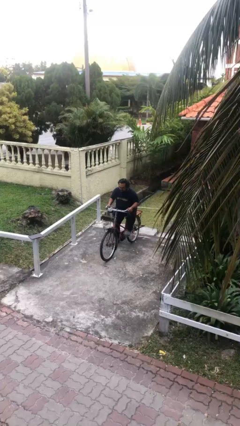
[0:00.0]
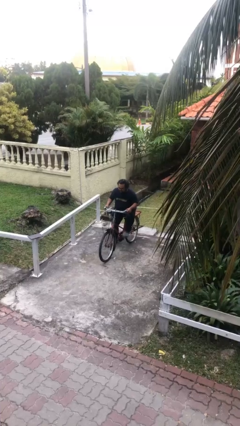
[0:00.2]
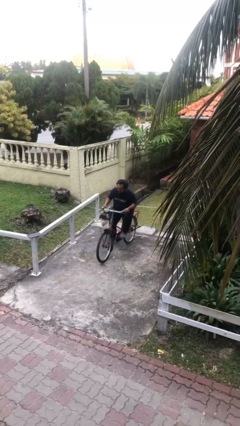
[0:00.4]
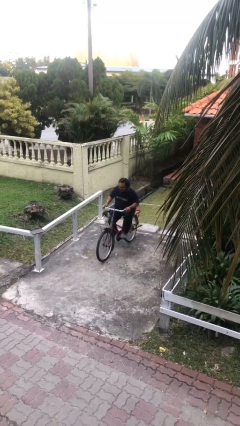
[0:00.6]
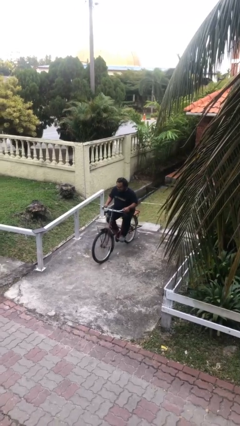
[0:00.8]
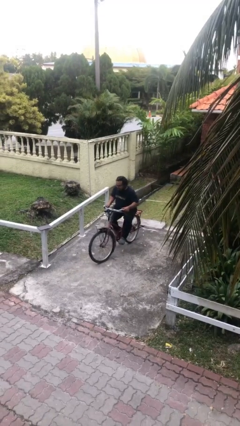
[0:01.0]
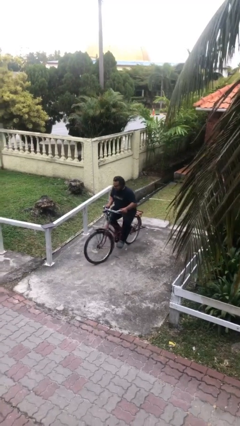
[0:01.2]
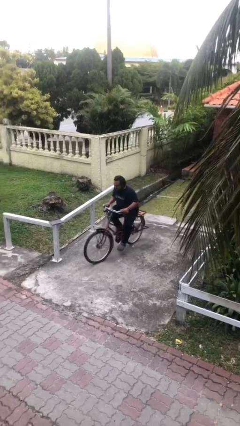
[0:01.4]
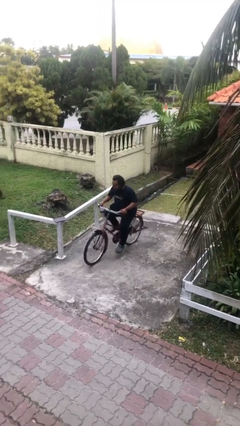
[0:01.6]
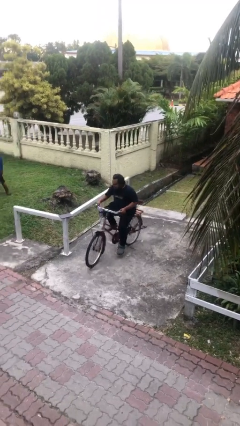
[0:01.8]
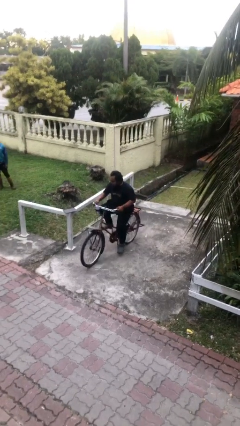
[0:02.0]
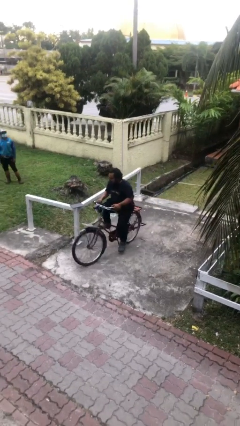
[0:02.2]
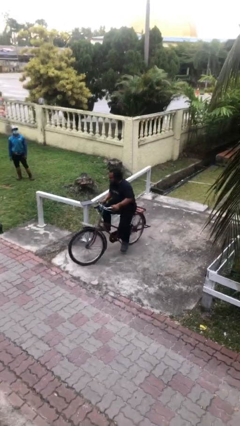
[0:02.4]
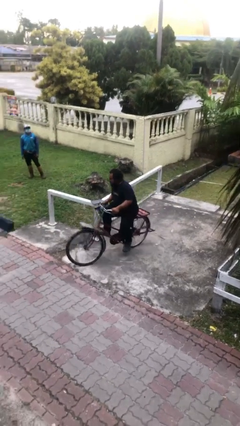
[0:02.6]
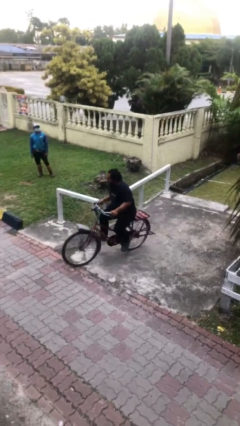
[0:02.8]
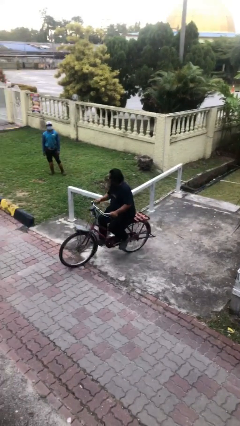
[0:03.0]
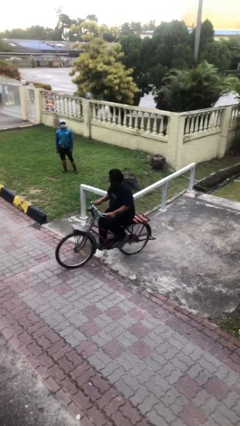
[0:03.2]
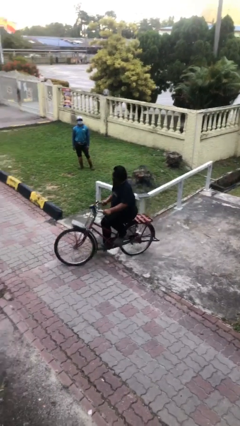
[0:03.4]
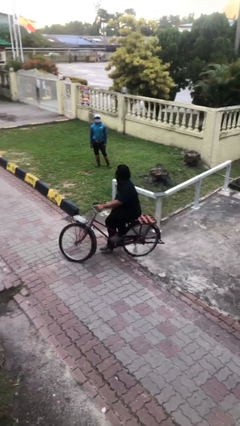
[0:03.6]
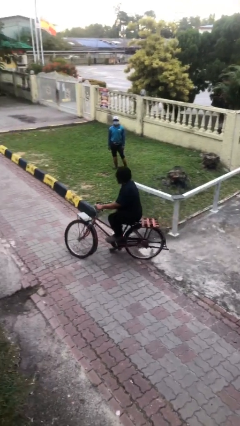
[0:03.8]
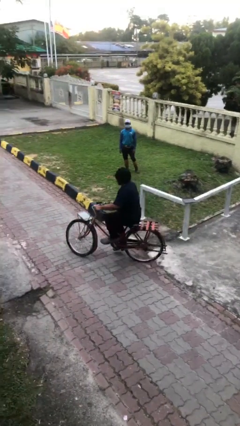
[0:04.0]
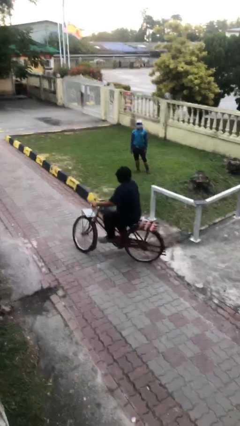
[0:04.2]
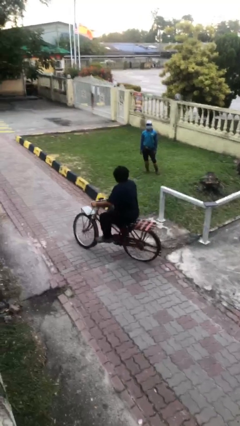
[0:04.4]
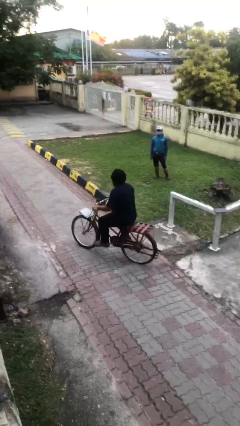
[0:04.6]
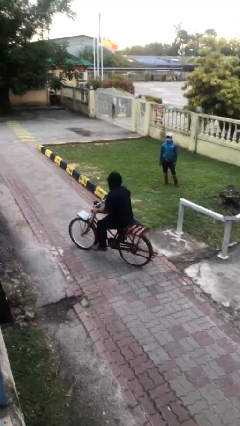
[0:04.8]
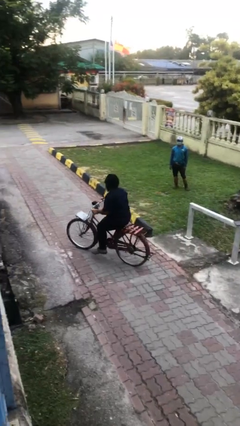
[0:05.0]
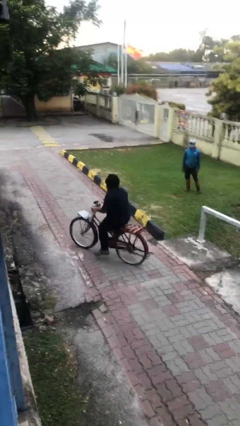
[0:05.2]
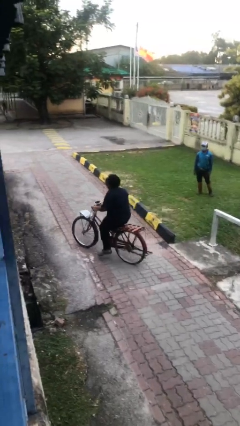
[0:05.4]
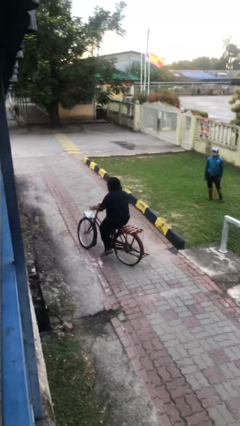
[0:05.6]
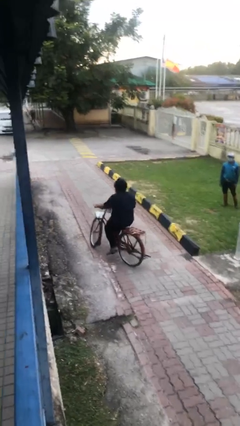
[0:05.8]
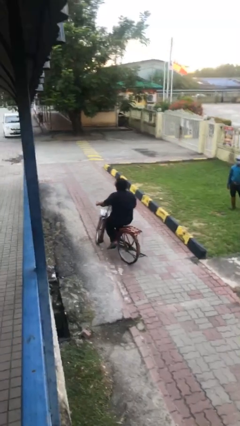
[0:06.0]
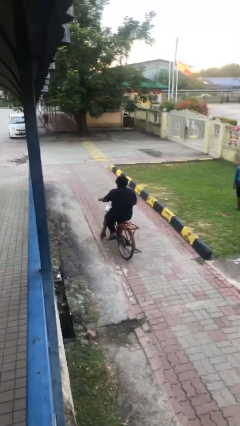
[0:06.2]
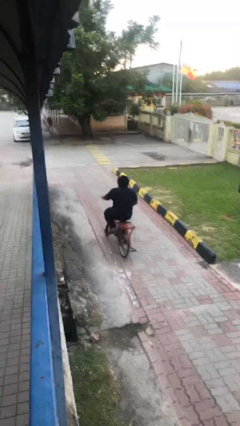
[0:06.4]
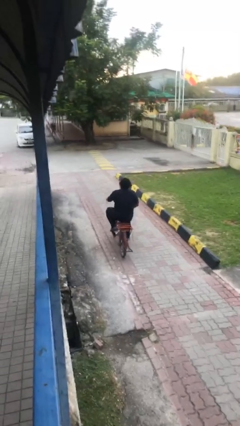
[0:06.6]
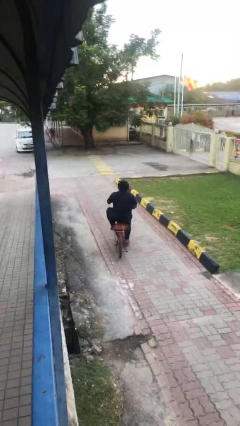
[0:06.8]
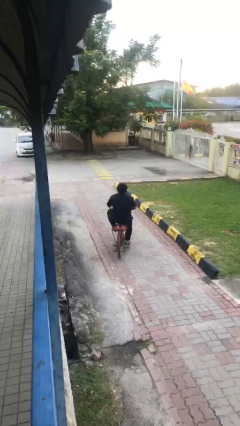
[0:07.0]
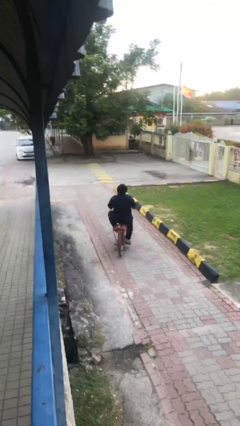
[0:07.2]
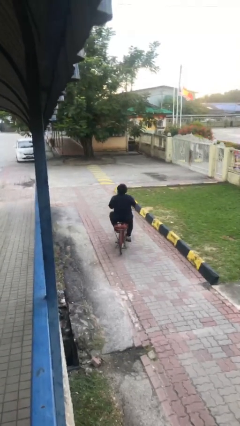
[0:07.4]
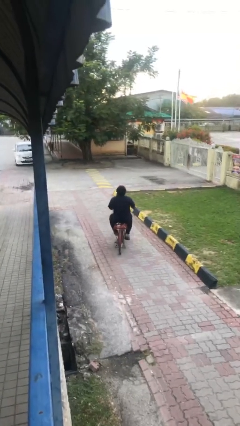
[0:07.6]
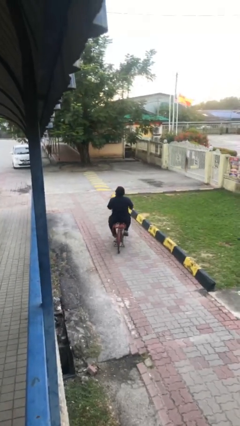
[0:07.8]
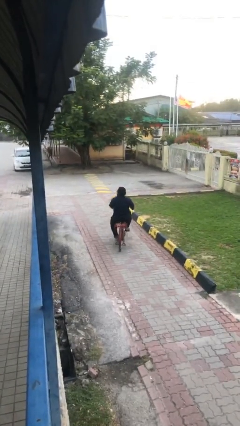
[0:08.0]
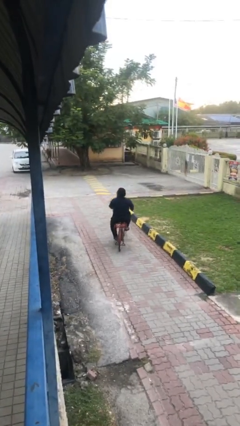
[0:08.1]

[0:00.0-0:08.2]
person rides bicycle

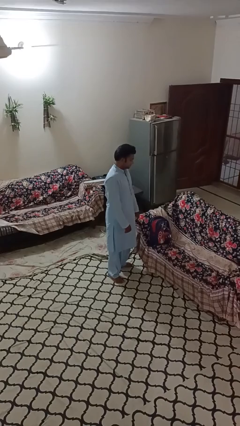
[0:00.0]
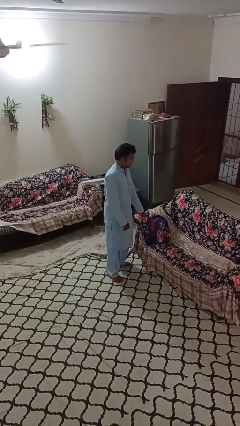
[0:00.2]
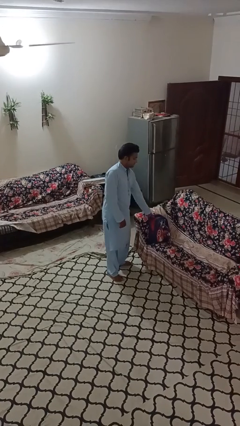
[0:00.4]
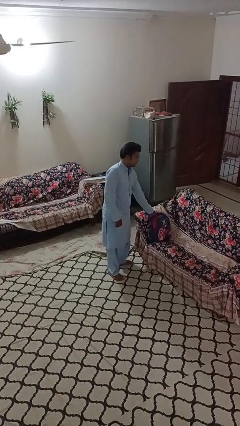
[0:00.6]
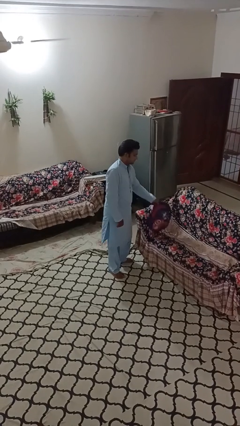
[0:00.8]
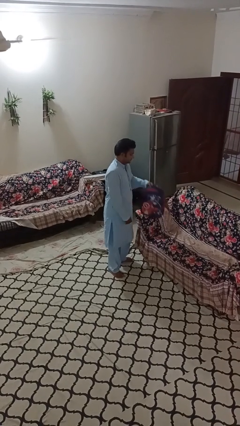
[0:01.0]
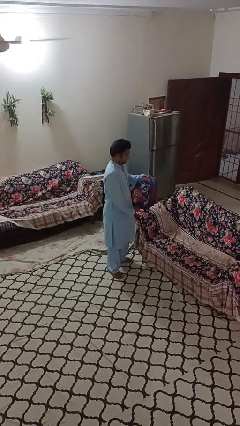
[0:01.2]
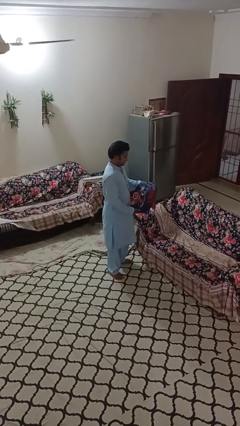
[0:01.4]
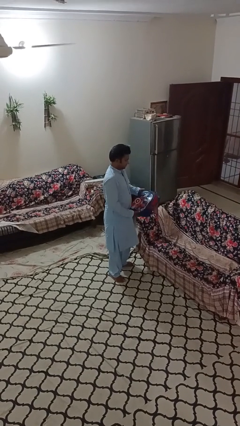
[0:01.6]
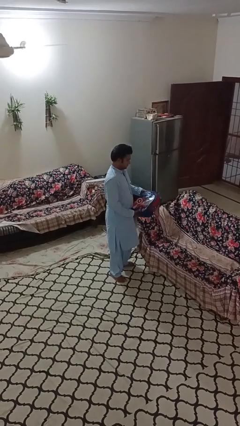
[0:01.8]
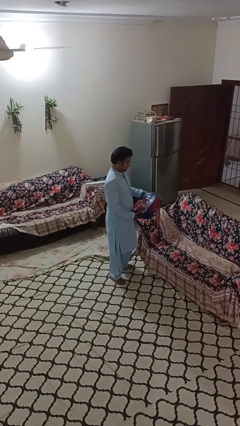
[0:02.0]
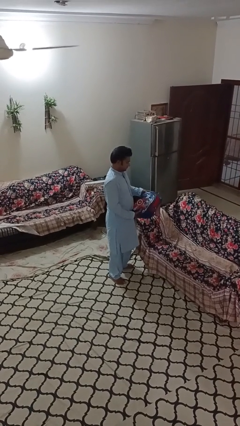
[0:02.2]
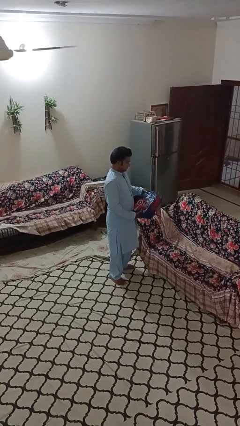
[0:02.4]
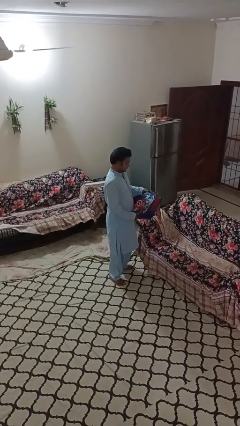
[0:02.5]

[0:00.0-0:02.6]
person picks up object from couch

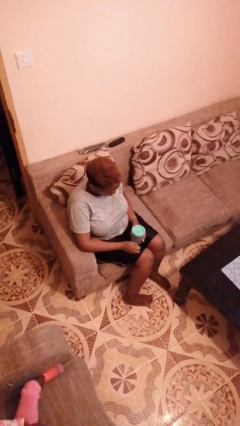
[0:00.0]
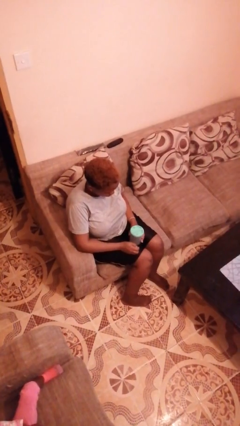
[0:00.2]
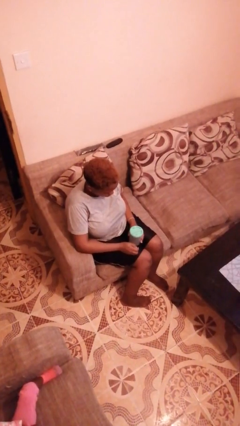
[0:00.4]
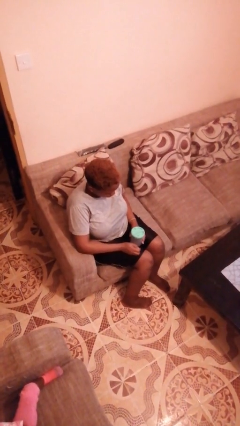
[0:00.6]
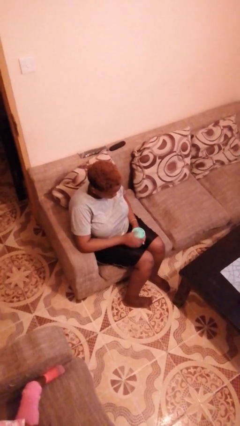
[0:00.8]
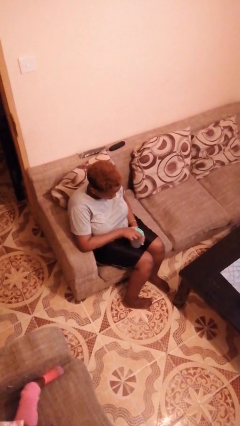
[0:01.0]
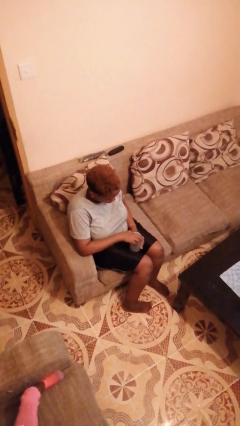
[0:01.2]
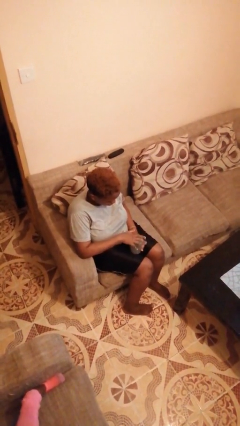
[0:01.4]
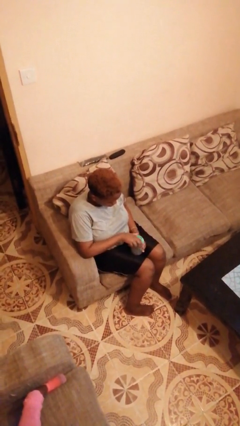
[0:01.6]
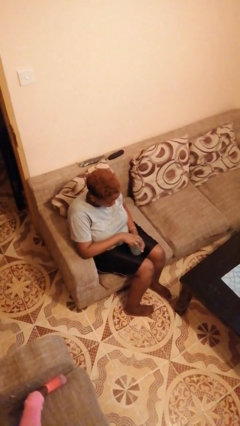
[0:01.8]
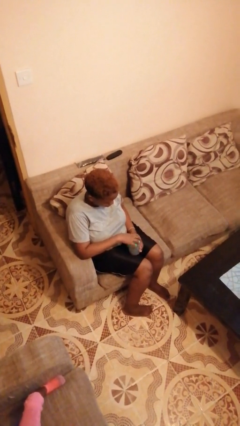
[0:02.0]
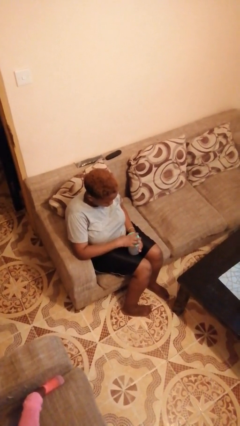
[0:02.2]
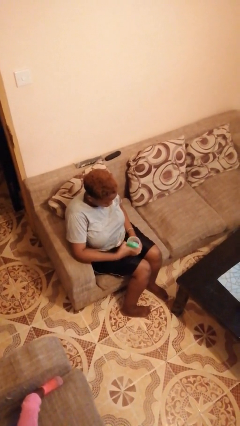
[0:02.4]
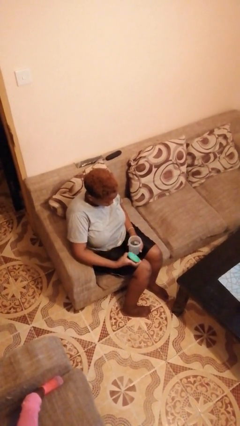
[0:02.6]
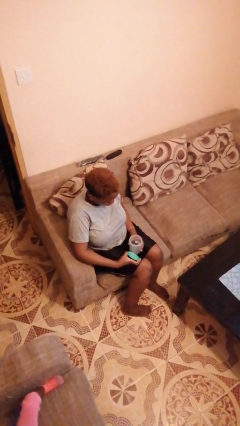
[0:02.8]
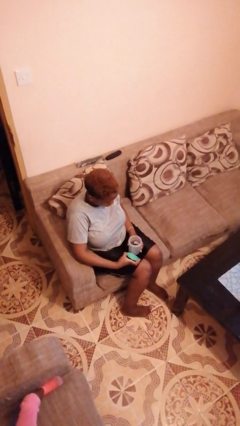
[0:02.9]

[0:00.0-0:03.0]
person opens jar

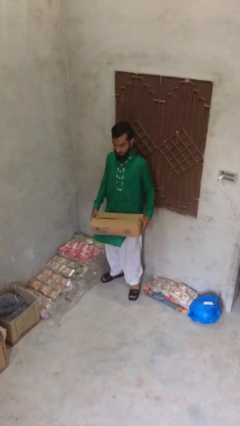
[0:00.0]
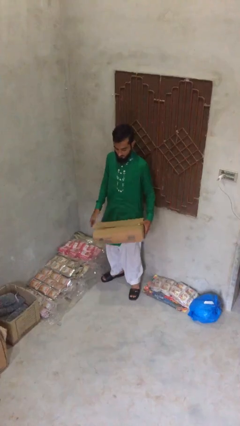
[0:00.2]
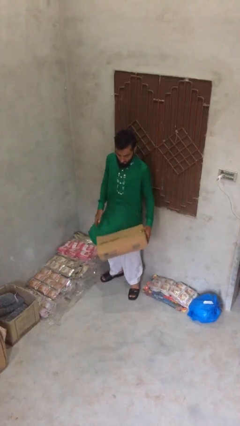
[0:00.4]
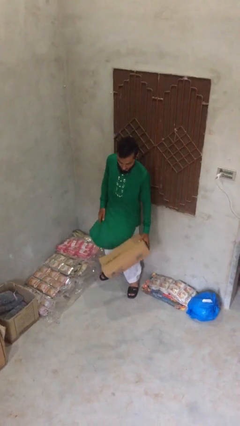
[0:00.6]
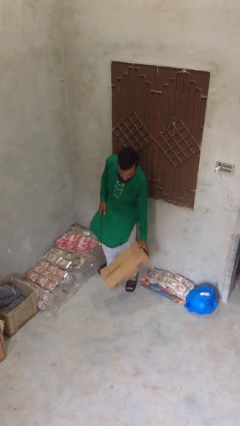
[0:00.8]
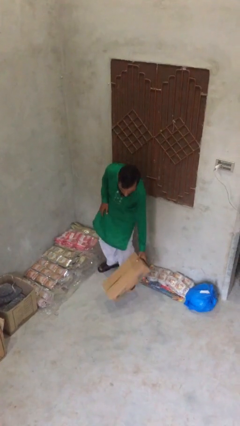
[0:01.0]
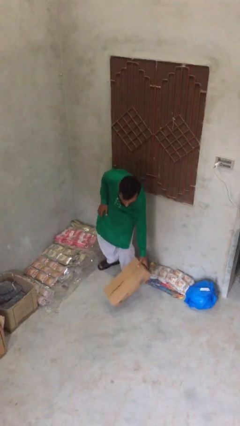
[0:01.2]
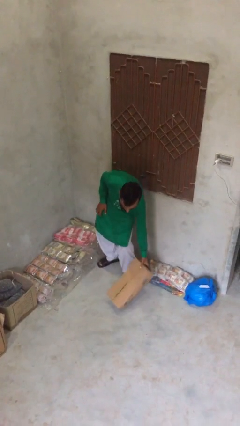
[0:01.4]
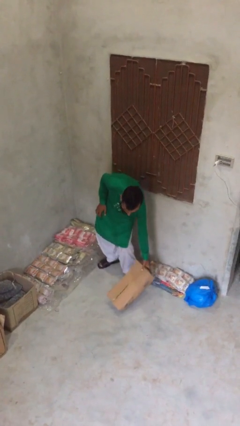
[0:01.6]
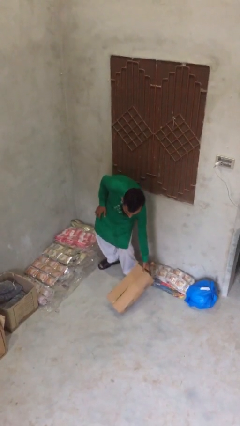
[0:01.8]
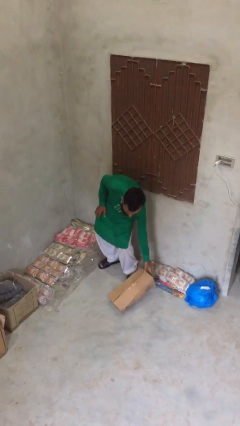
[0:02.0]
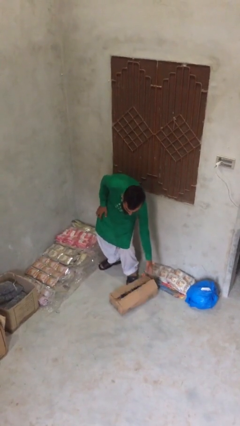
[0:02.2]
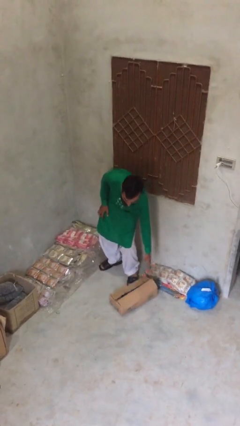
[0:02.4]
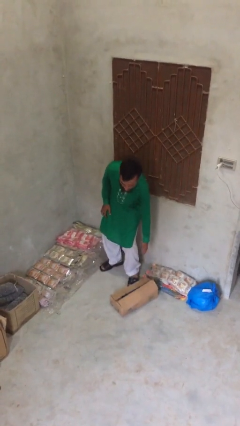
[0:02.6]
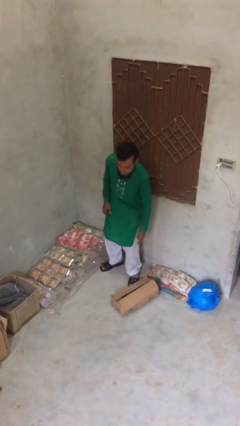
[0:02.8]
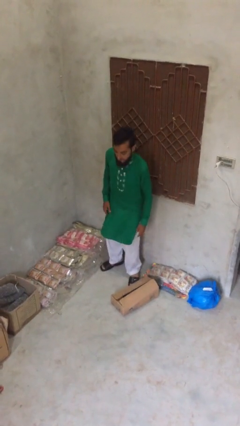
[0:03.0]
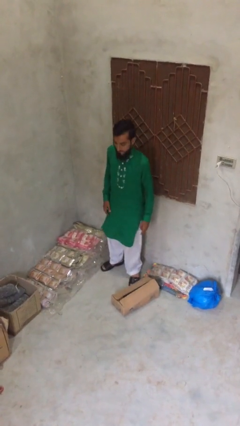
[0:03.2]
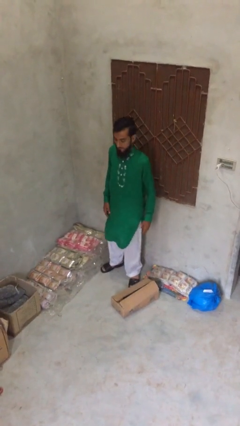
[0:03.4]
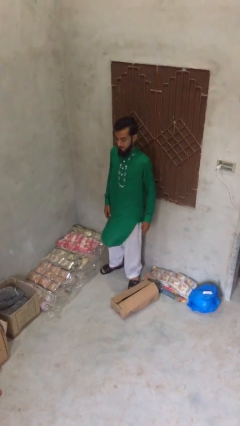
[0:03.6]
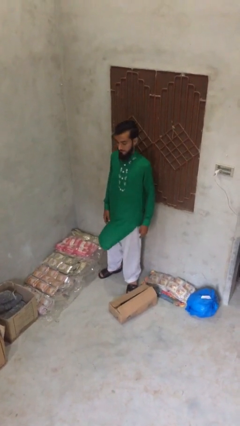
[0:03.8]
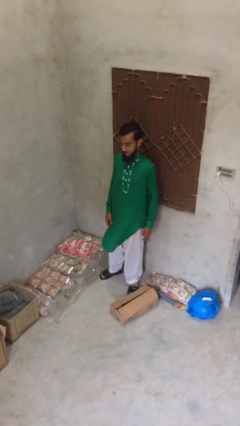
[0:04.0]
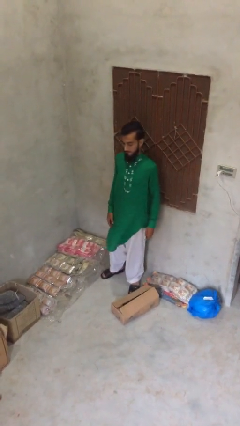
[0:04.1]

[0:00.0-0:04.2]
person puts down object on floor
